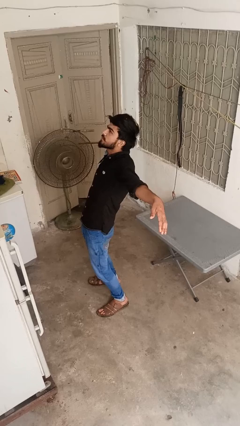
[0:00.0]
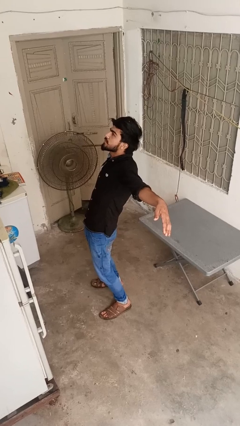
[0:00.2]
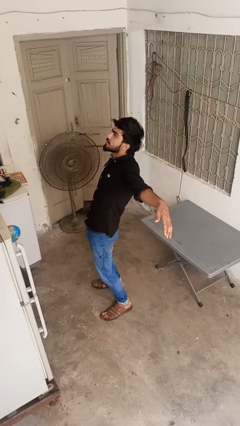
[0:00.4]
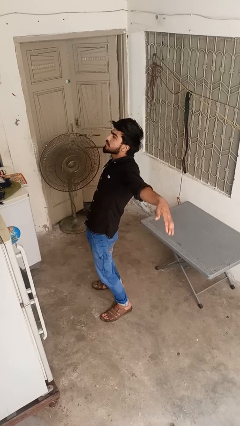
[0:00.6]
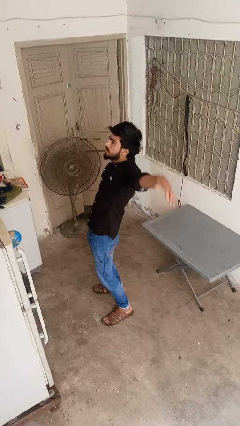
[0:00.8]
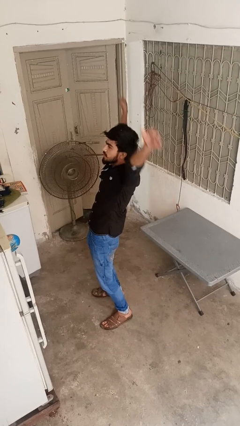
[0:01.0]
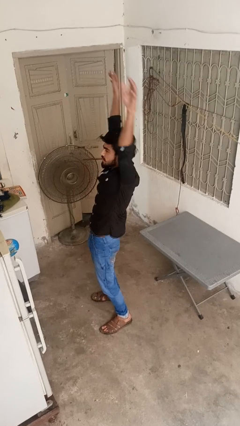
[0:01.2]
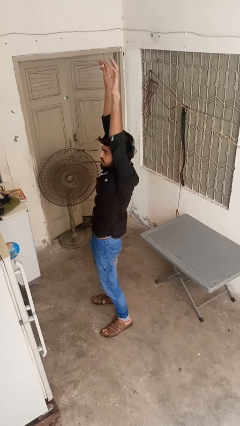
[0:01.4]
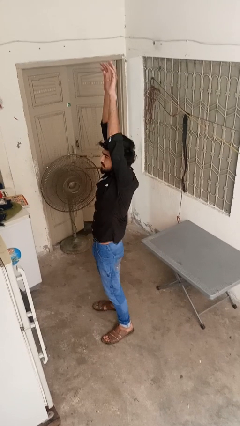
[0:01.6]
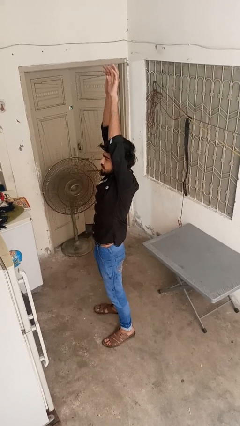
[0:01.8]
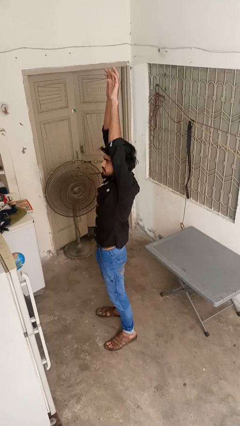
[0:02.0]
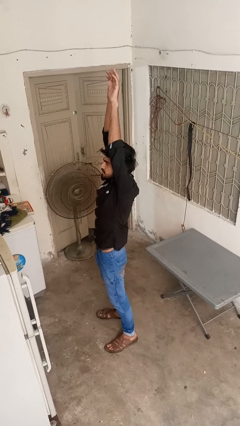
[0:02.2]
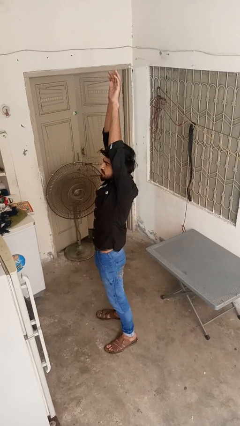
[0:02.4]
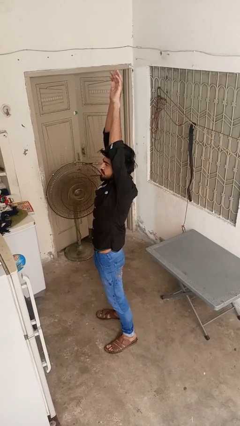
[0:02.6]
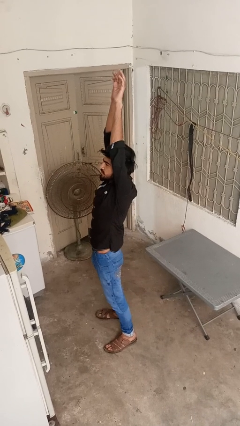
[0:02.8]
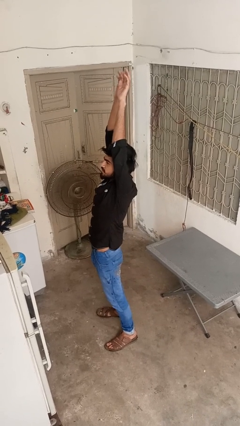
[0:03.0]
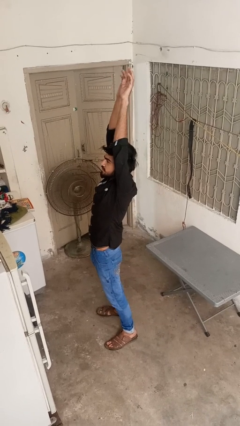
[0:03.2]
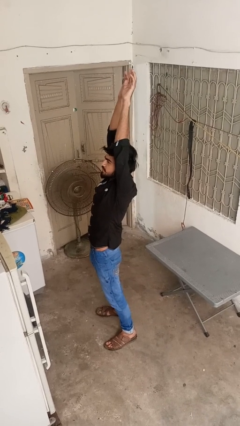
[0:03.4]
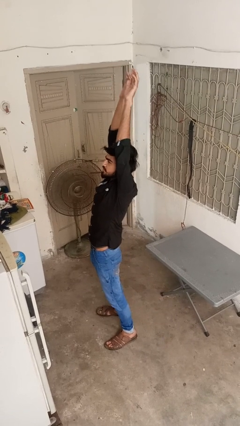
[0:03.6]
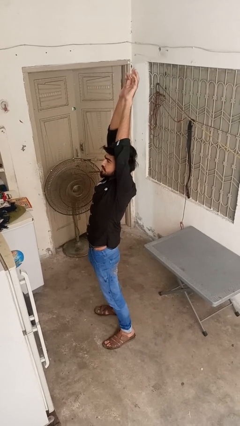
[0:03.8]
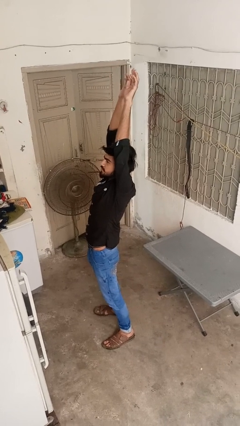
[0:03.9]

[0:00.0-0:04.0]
person stretches arms over head

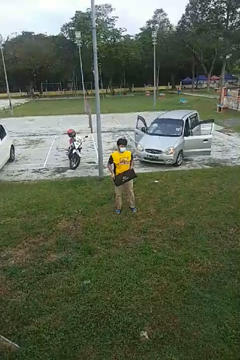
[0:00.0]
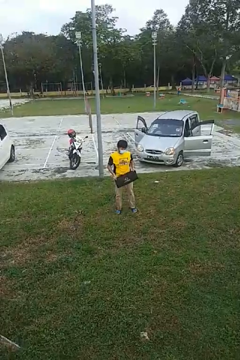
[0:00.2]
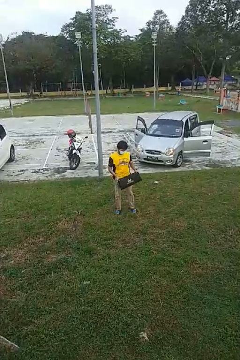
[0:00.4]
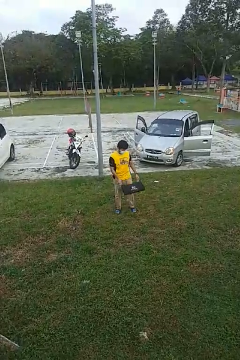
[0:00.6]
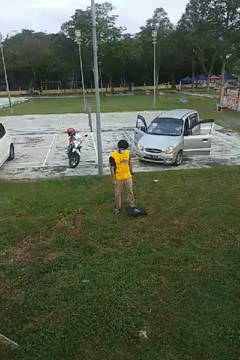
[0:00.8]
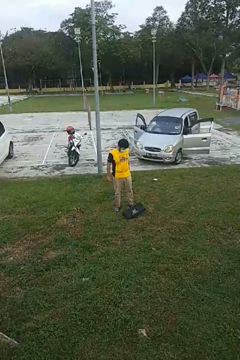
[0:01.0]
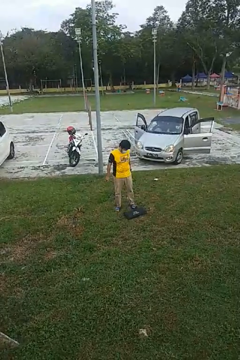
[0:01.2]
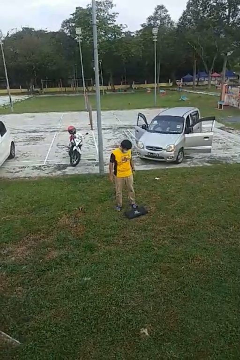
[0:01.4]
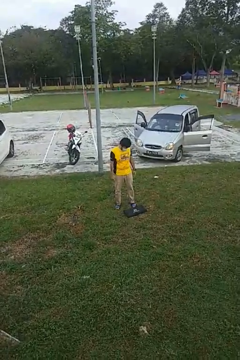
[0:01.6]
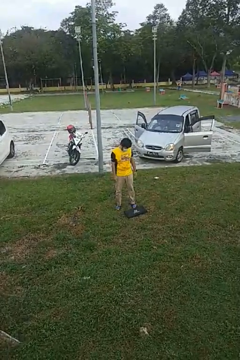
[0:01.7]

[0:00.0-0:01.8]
person drops object

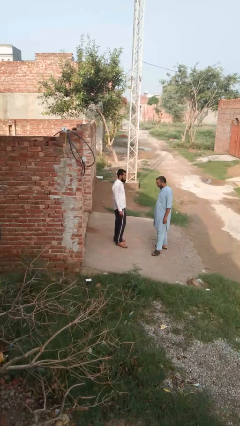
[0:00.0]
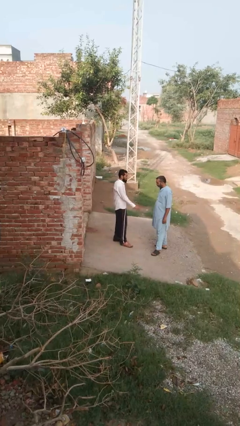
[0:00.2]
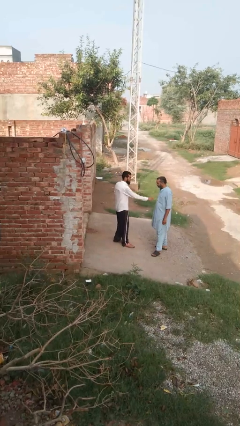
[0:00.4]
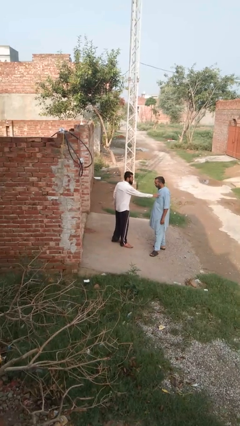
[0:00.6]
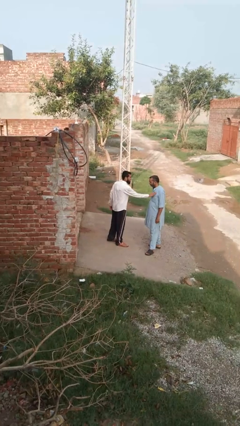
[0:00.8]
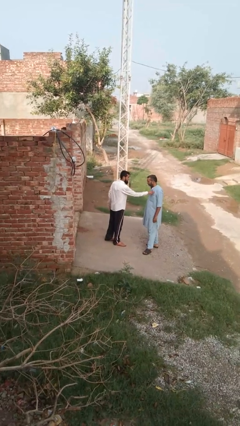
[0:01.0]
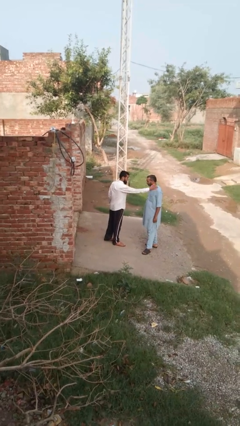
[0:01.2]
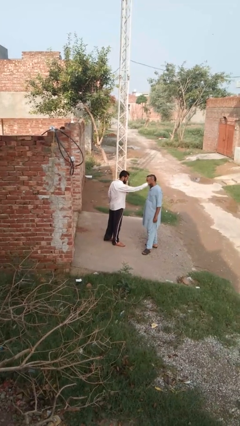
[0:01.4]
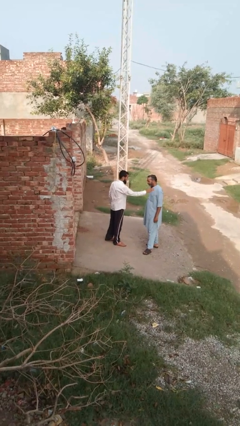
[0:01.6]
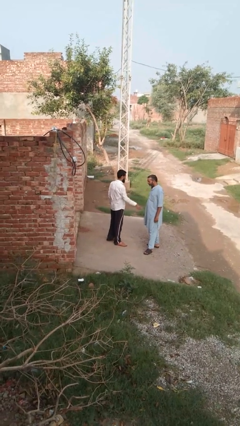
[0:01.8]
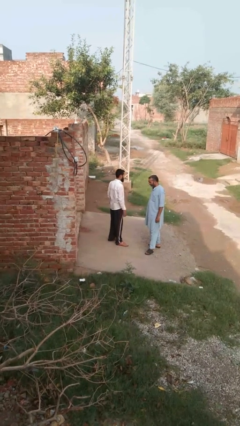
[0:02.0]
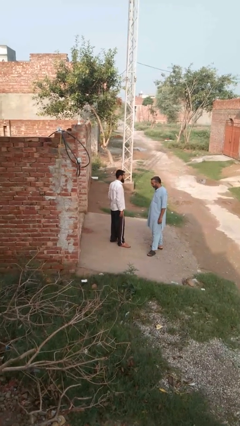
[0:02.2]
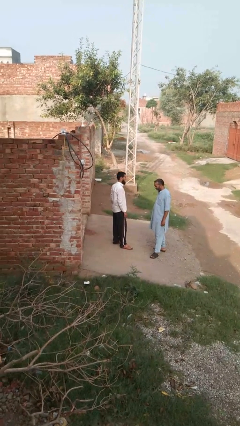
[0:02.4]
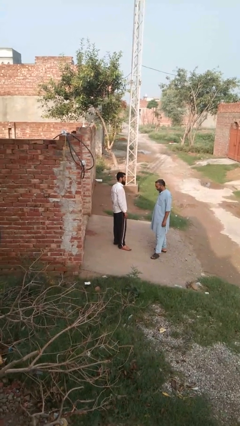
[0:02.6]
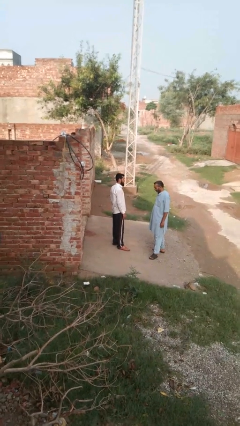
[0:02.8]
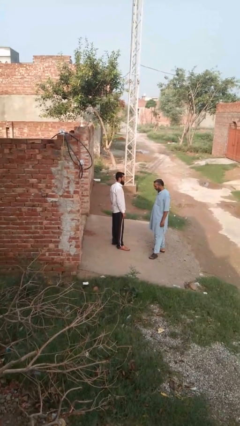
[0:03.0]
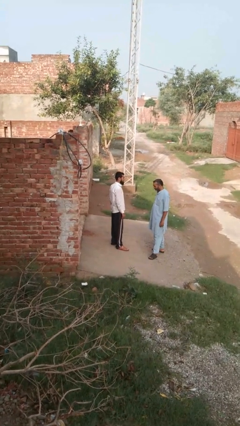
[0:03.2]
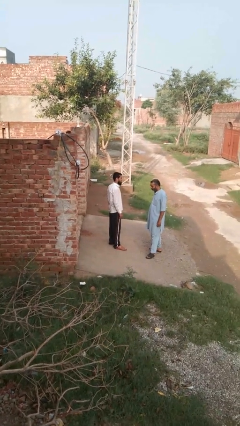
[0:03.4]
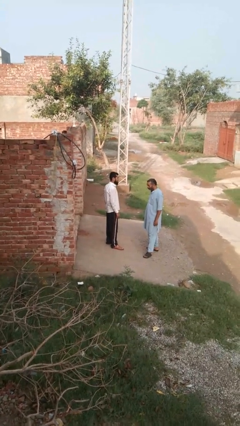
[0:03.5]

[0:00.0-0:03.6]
person shoves person

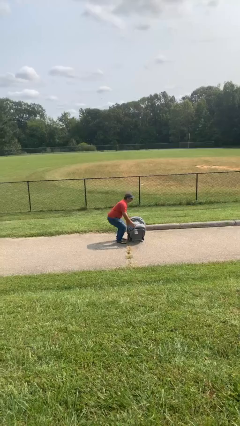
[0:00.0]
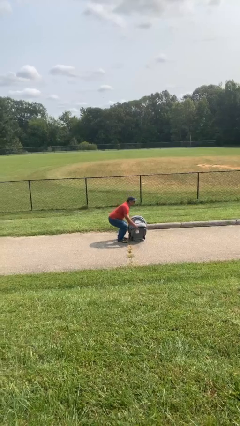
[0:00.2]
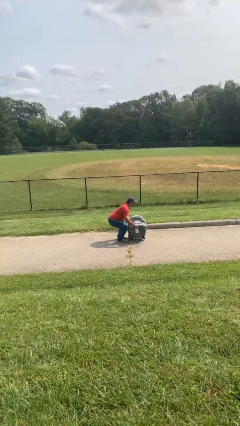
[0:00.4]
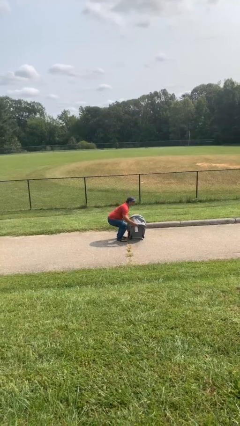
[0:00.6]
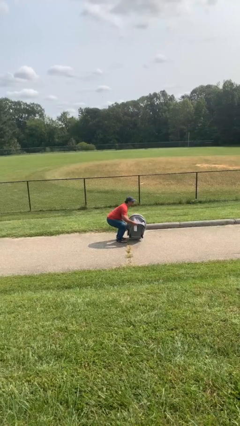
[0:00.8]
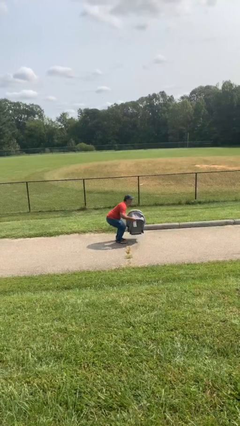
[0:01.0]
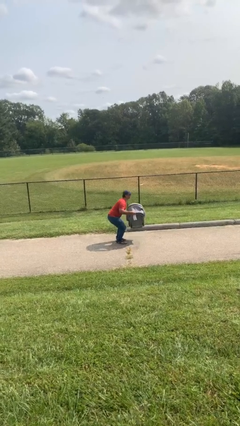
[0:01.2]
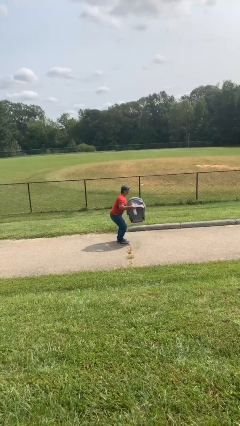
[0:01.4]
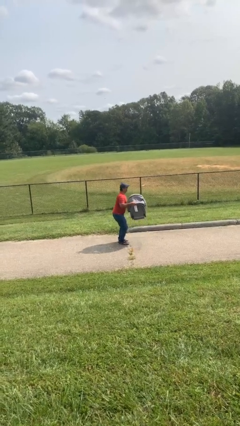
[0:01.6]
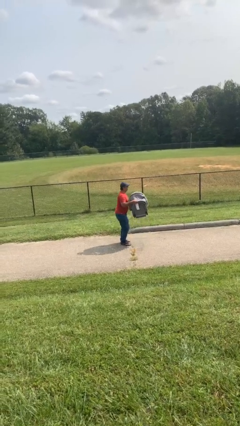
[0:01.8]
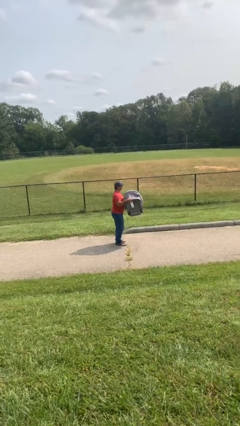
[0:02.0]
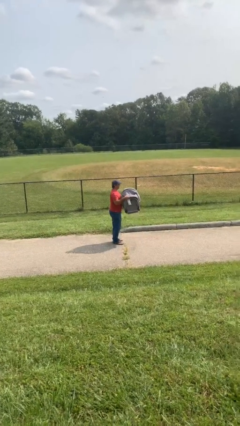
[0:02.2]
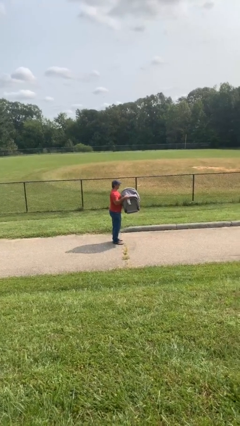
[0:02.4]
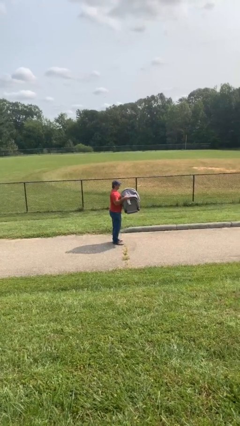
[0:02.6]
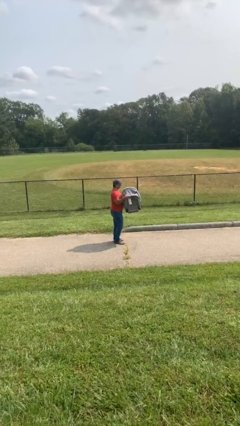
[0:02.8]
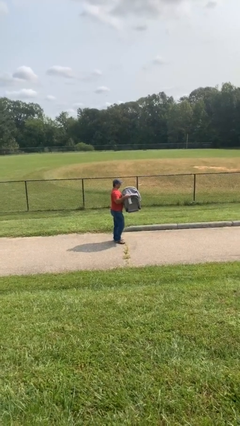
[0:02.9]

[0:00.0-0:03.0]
person picks up object from floor

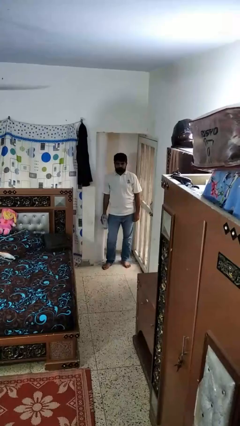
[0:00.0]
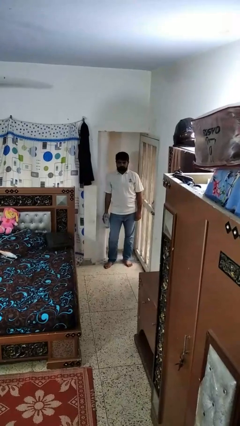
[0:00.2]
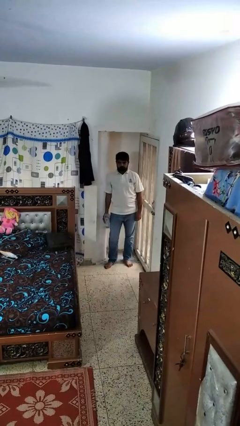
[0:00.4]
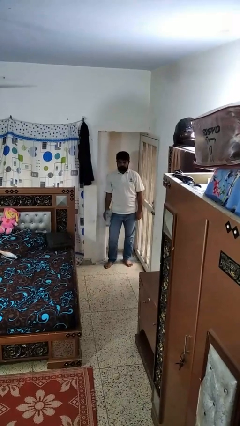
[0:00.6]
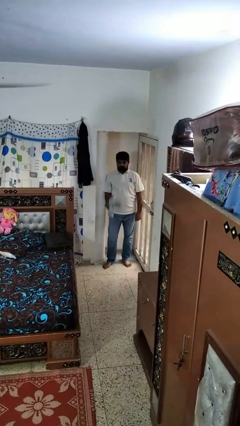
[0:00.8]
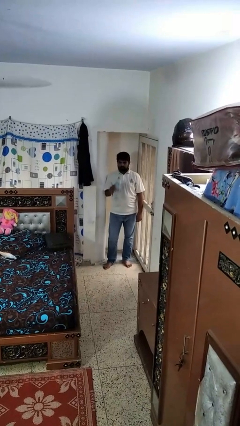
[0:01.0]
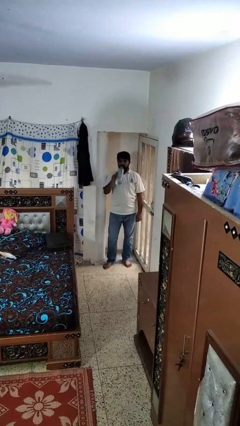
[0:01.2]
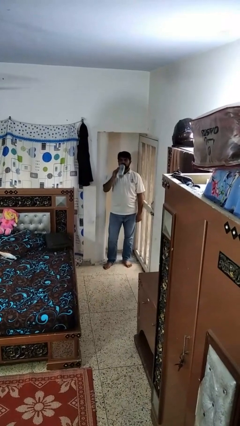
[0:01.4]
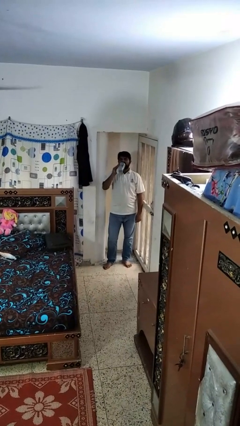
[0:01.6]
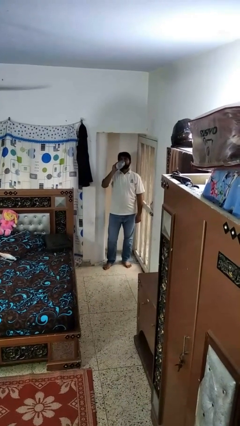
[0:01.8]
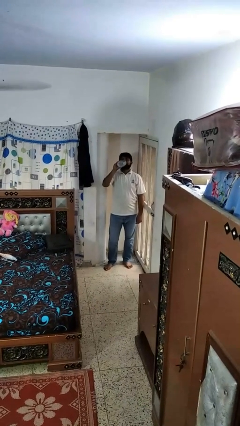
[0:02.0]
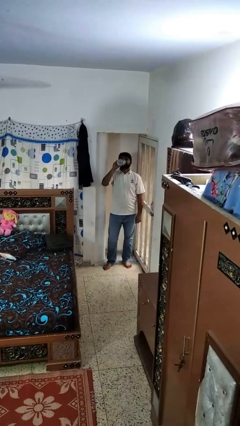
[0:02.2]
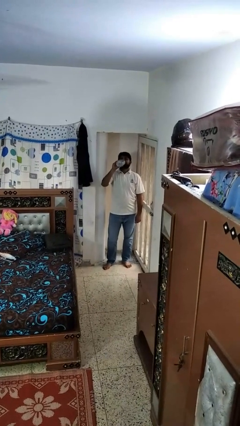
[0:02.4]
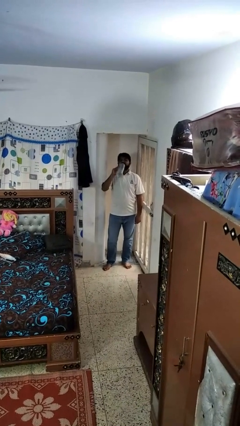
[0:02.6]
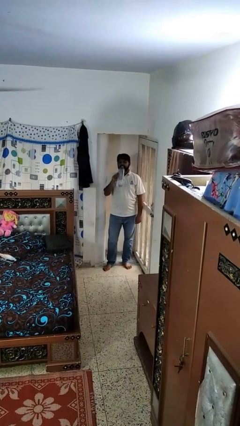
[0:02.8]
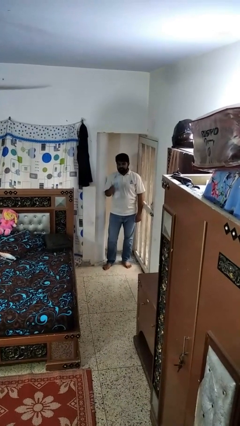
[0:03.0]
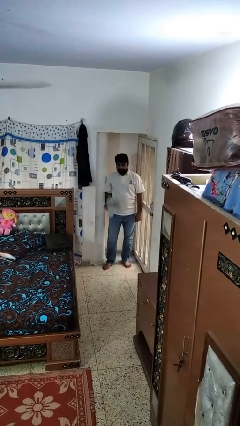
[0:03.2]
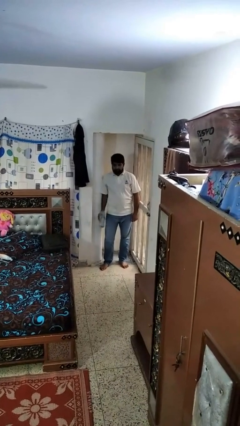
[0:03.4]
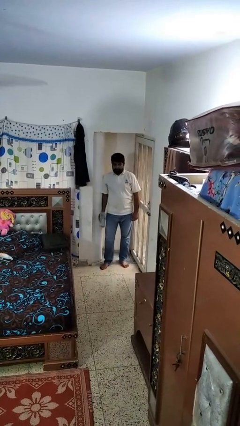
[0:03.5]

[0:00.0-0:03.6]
person drinks from bottle

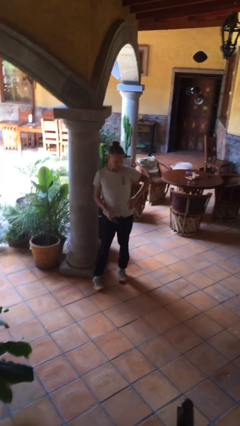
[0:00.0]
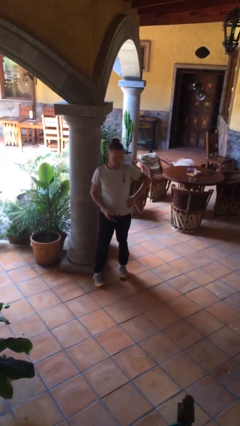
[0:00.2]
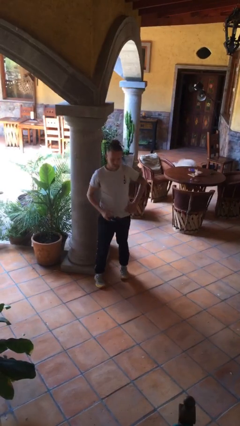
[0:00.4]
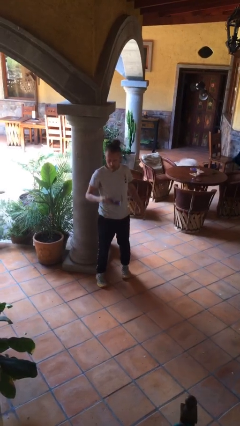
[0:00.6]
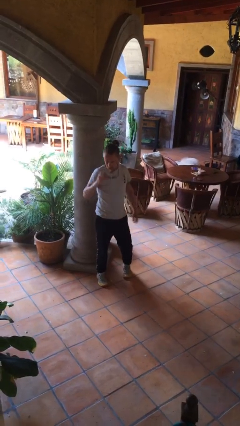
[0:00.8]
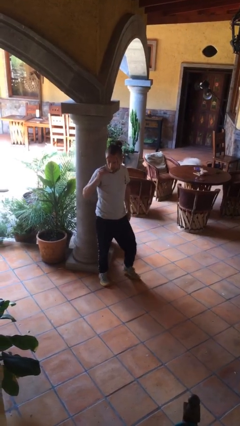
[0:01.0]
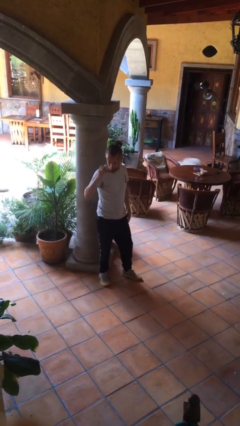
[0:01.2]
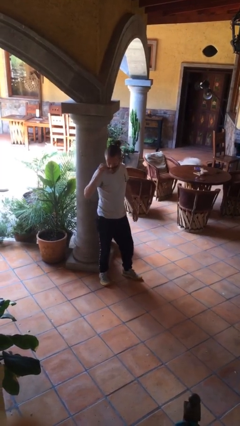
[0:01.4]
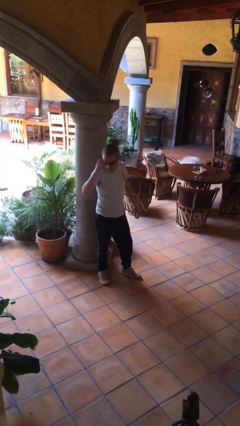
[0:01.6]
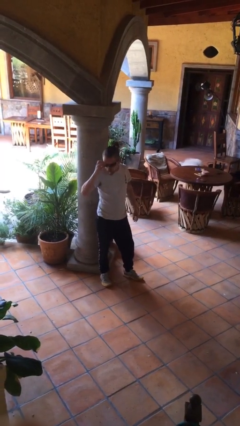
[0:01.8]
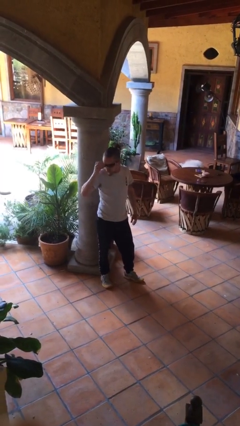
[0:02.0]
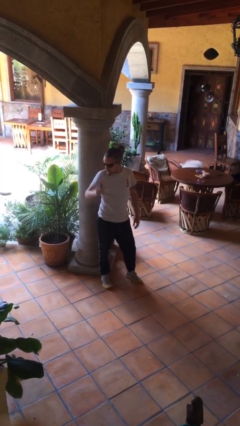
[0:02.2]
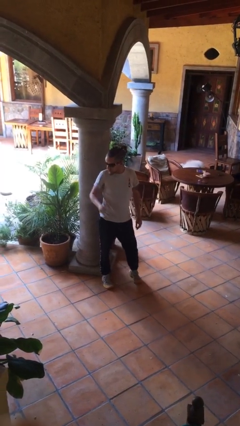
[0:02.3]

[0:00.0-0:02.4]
person puts on sunglasses
